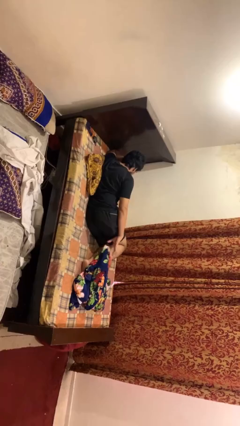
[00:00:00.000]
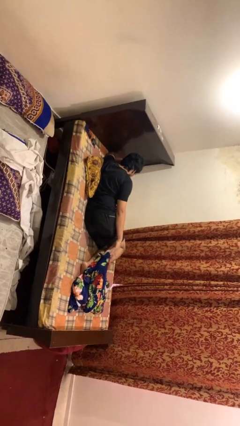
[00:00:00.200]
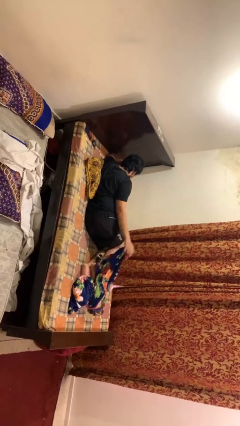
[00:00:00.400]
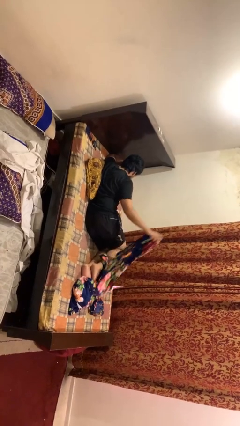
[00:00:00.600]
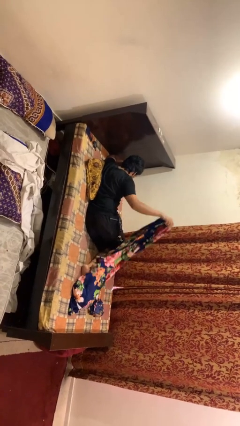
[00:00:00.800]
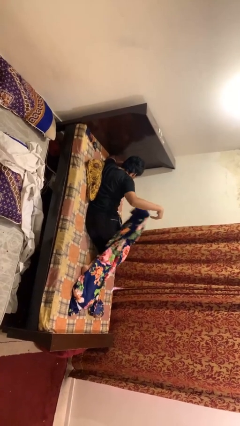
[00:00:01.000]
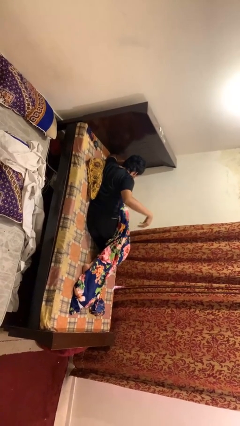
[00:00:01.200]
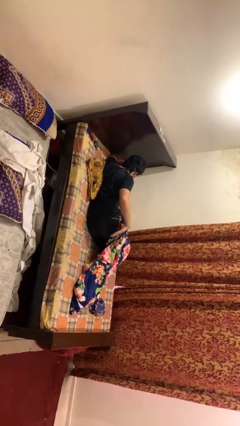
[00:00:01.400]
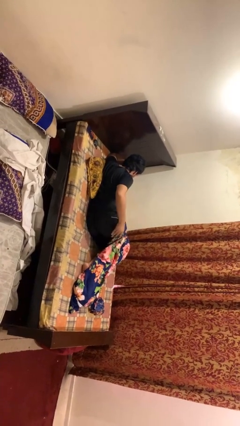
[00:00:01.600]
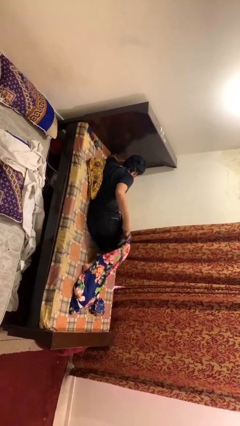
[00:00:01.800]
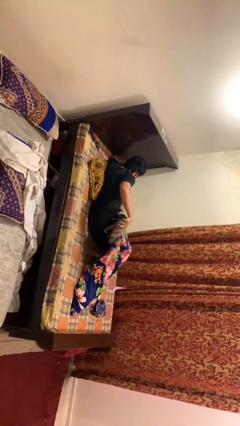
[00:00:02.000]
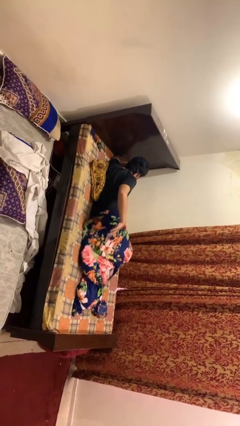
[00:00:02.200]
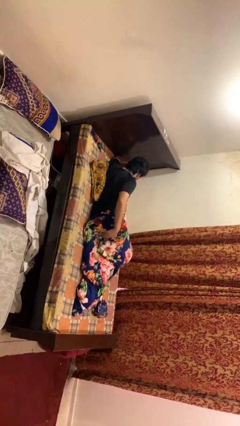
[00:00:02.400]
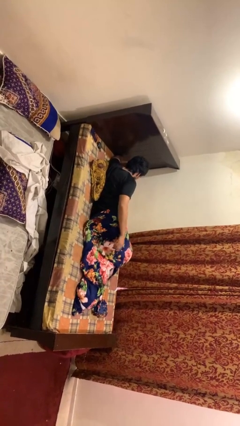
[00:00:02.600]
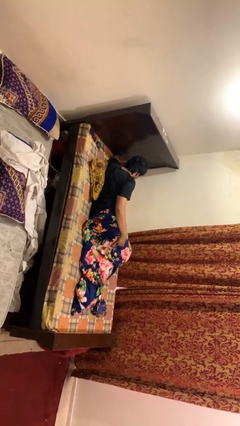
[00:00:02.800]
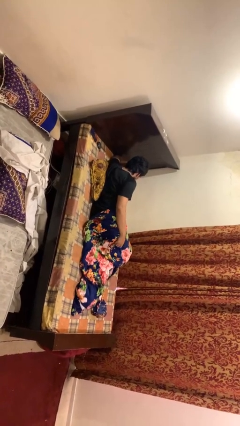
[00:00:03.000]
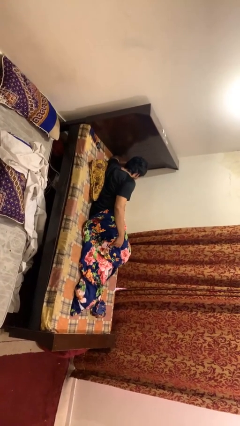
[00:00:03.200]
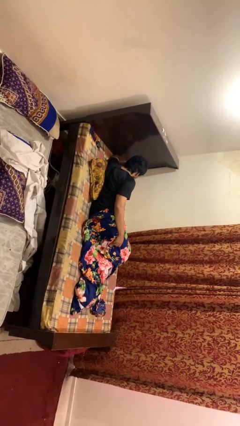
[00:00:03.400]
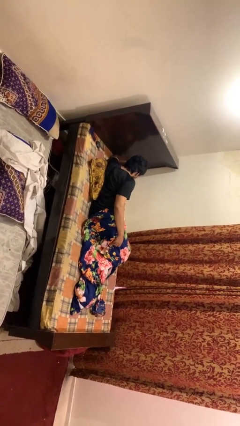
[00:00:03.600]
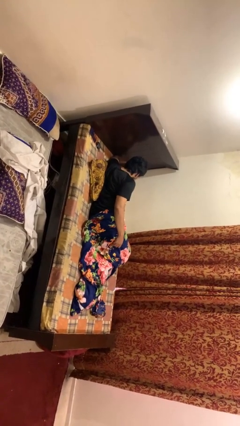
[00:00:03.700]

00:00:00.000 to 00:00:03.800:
person covers with blanket

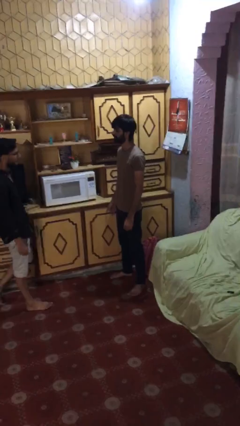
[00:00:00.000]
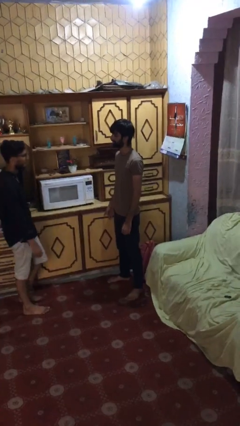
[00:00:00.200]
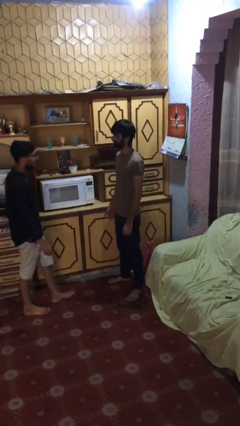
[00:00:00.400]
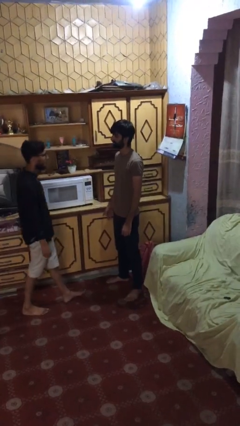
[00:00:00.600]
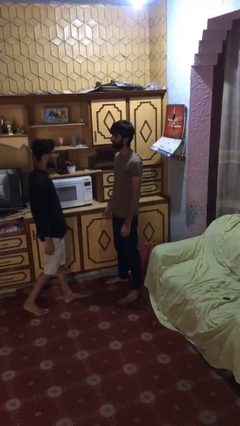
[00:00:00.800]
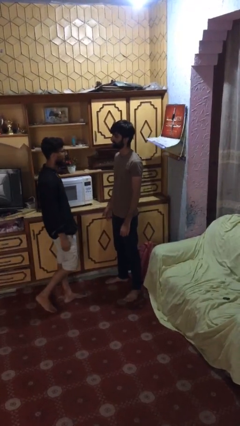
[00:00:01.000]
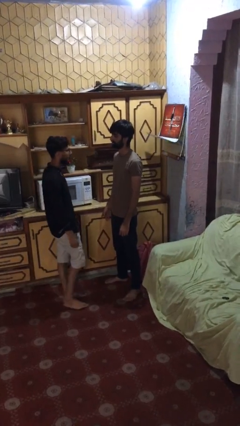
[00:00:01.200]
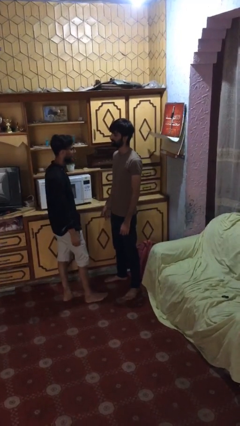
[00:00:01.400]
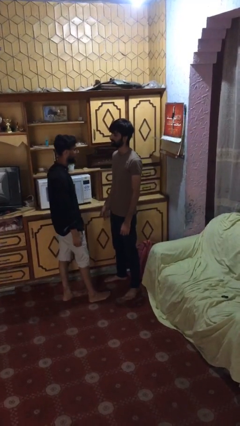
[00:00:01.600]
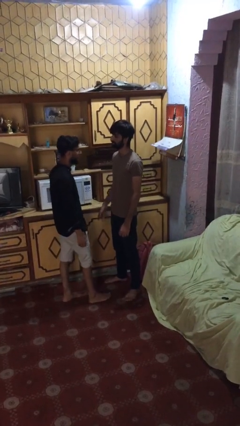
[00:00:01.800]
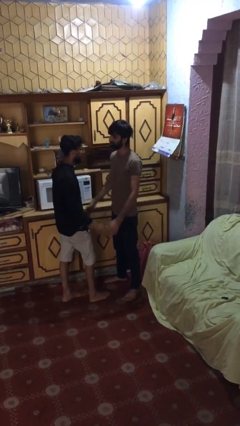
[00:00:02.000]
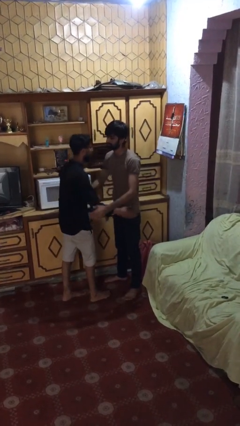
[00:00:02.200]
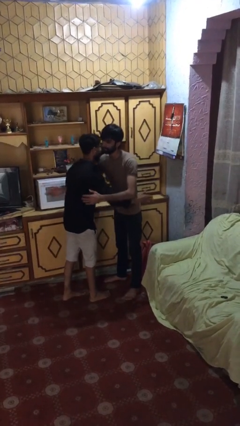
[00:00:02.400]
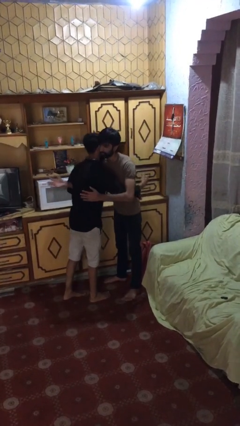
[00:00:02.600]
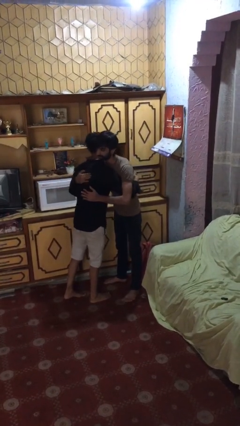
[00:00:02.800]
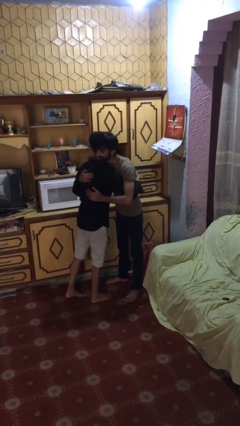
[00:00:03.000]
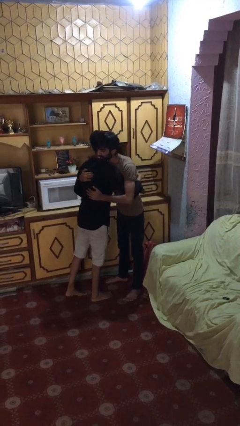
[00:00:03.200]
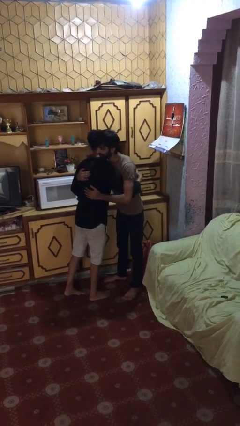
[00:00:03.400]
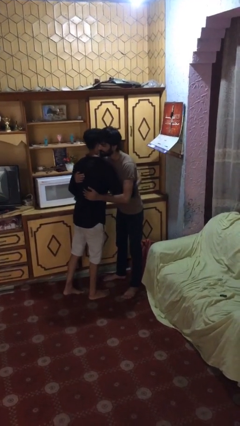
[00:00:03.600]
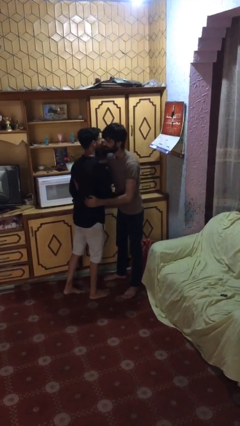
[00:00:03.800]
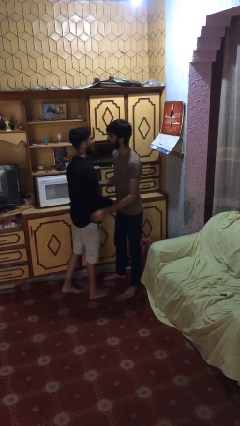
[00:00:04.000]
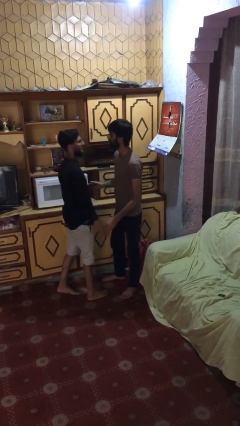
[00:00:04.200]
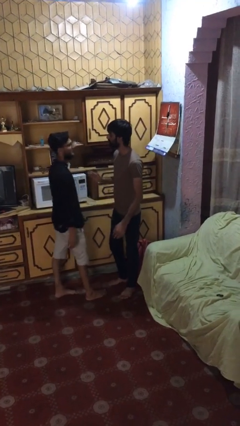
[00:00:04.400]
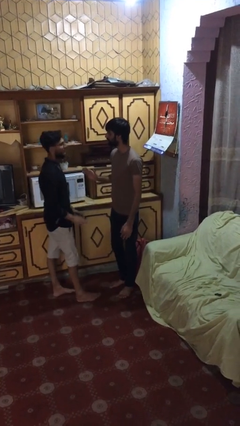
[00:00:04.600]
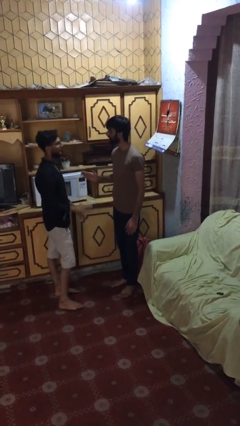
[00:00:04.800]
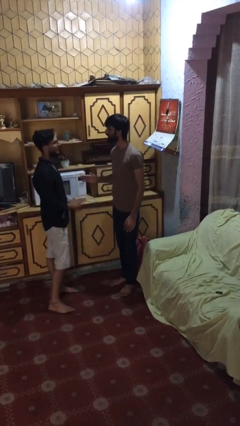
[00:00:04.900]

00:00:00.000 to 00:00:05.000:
person embraces person

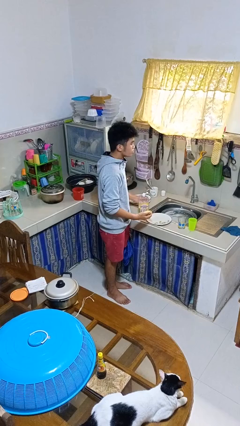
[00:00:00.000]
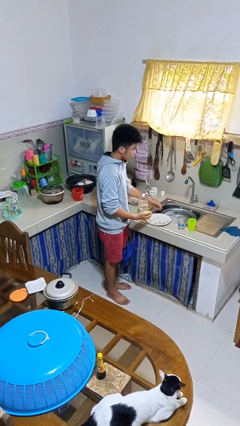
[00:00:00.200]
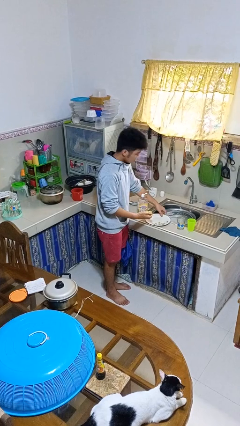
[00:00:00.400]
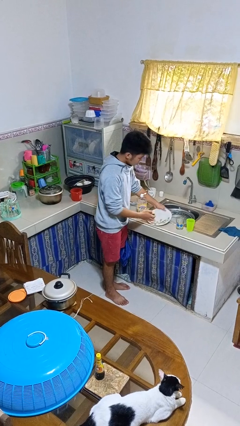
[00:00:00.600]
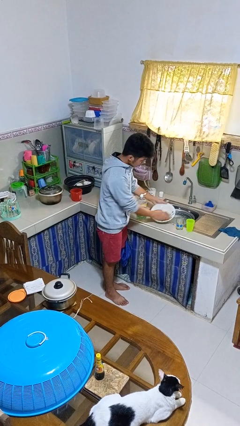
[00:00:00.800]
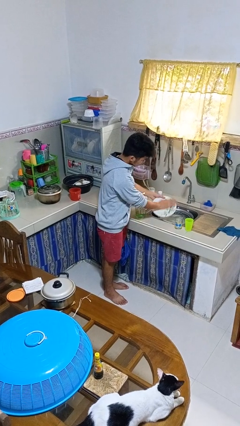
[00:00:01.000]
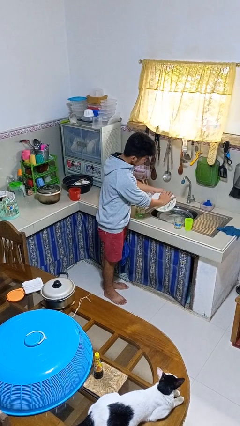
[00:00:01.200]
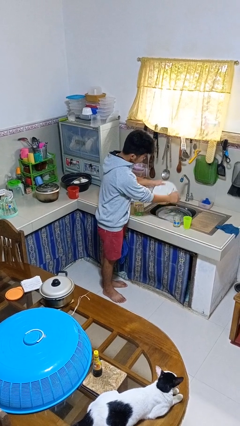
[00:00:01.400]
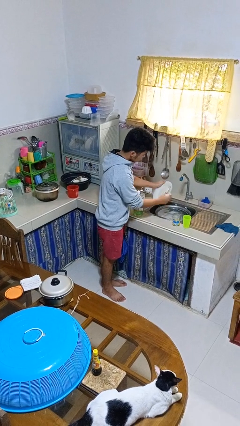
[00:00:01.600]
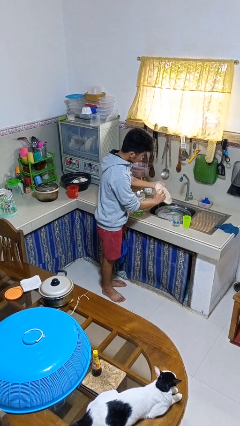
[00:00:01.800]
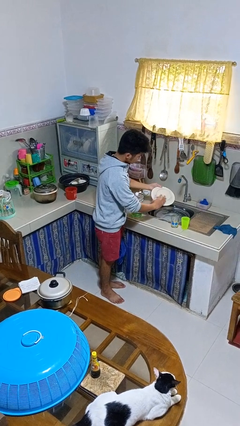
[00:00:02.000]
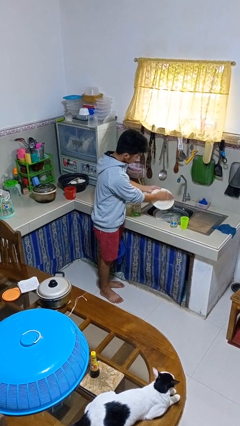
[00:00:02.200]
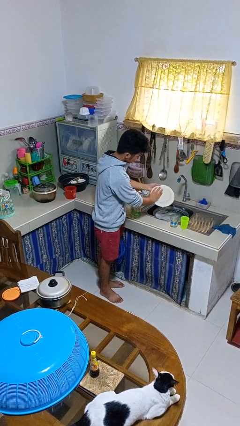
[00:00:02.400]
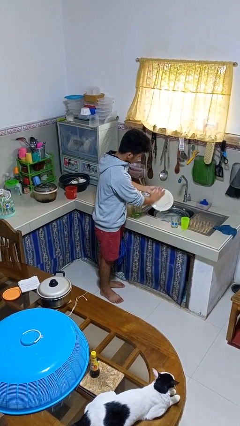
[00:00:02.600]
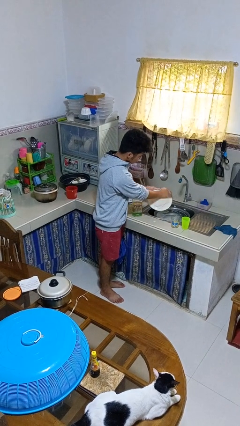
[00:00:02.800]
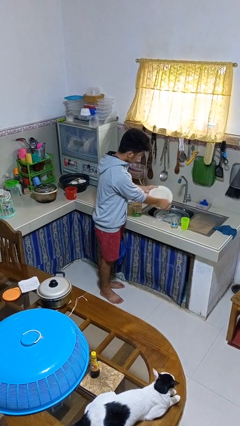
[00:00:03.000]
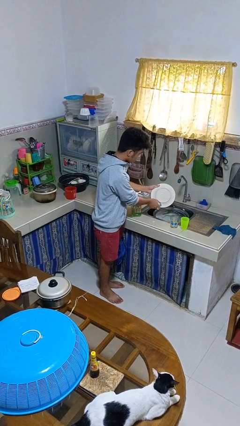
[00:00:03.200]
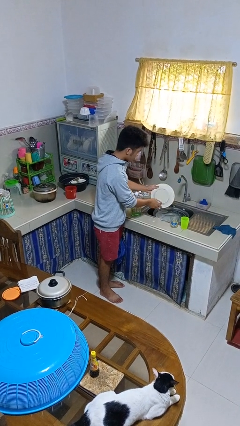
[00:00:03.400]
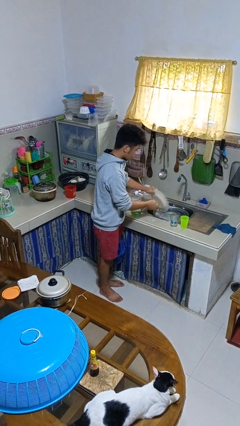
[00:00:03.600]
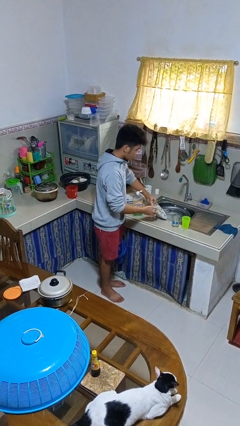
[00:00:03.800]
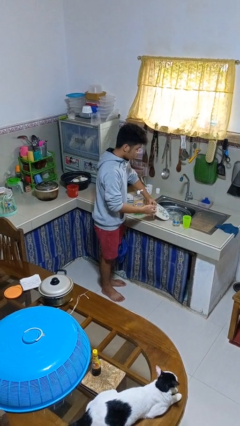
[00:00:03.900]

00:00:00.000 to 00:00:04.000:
person washes dish

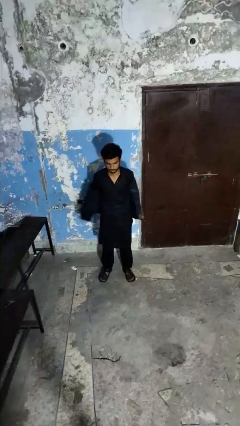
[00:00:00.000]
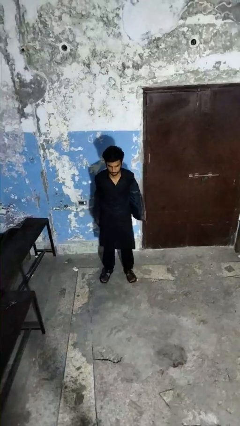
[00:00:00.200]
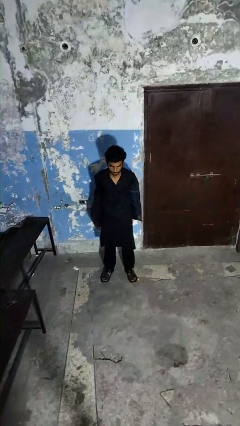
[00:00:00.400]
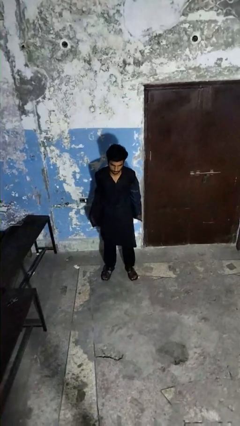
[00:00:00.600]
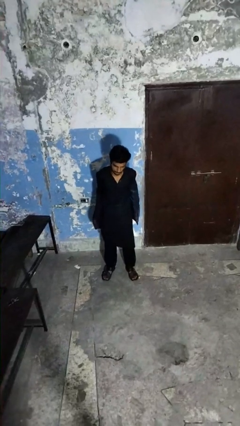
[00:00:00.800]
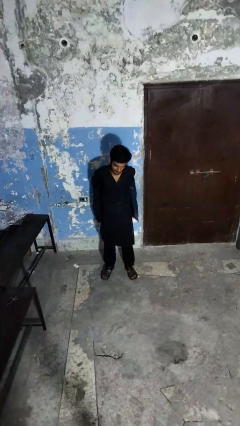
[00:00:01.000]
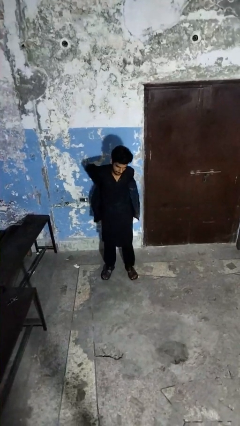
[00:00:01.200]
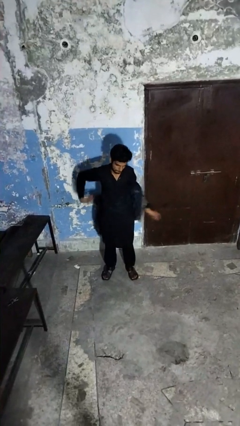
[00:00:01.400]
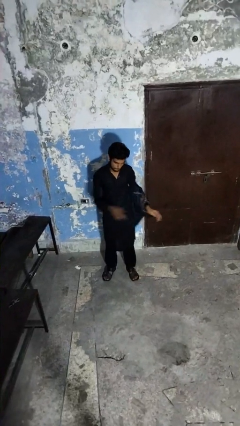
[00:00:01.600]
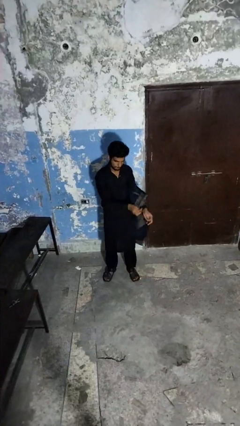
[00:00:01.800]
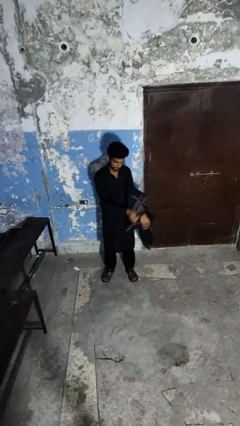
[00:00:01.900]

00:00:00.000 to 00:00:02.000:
person takes off jacket

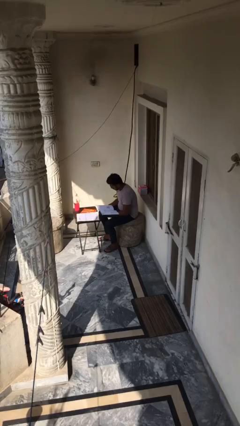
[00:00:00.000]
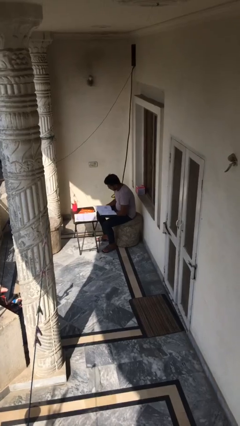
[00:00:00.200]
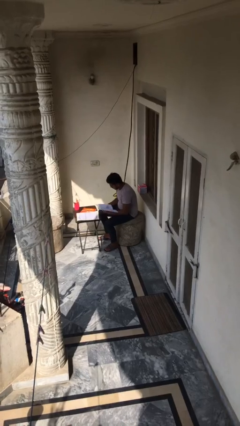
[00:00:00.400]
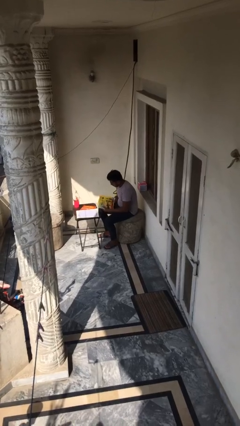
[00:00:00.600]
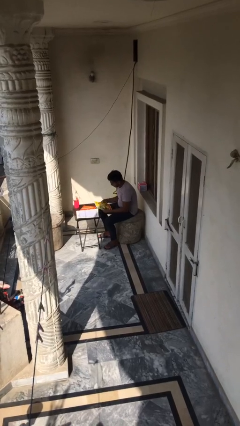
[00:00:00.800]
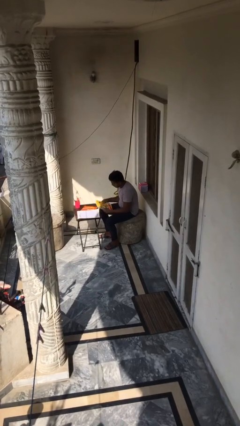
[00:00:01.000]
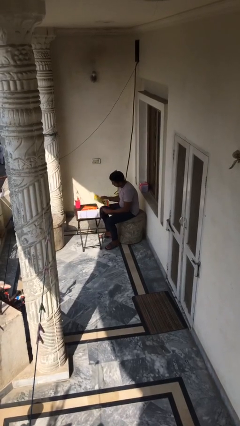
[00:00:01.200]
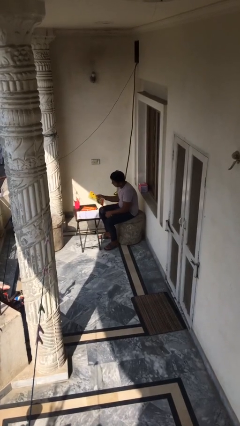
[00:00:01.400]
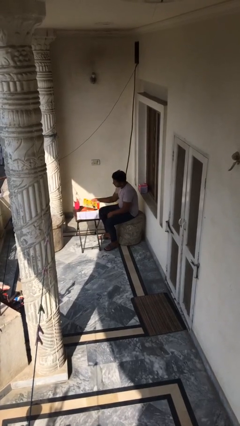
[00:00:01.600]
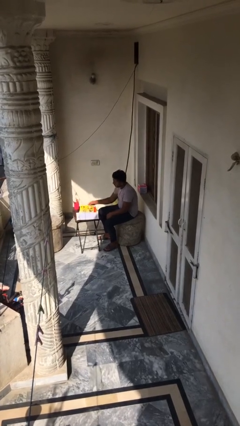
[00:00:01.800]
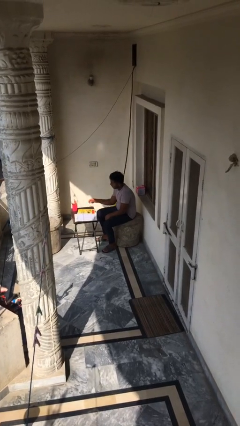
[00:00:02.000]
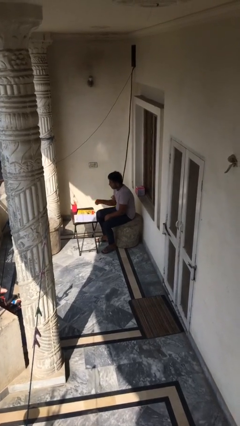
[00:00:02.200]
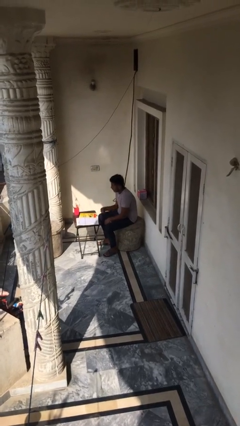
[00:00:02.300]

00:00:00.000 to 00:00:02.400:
person puts down object on table
